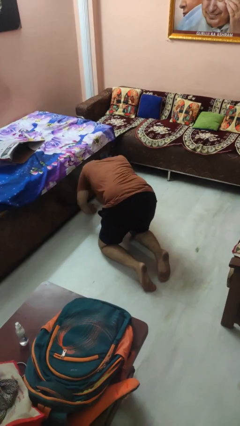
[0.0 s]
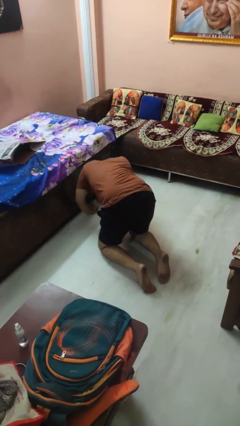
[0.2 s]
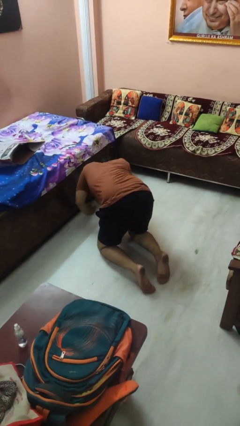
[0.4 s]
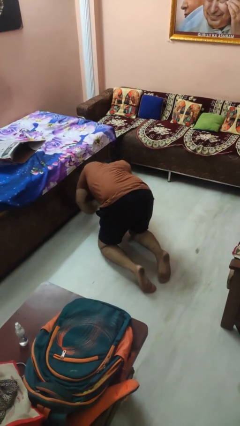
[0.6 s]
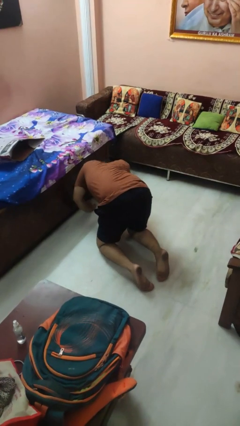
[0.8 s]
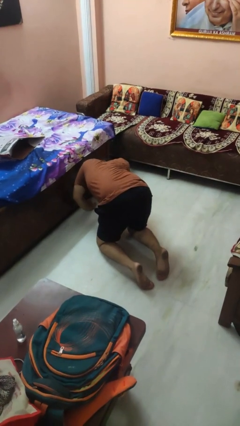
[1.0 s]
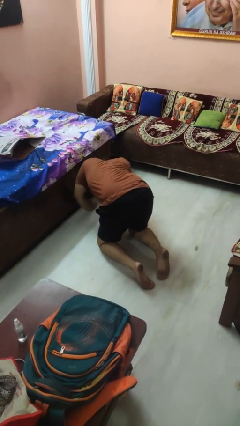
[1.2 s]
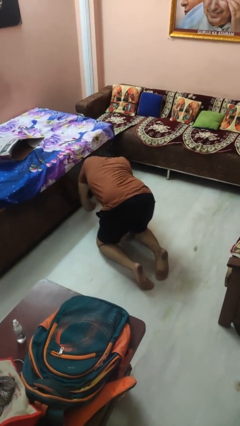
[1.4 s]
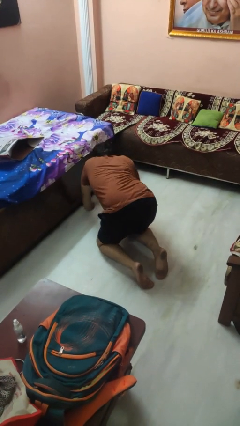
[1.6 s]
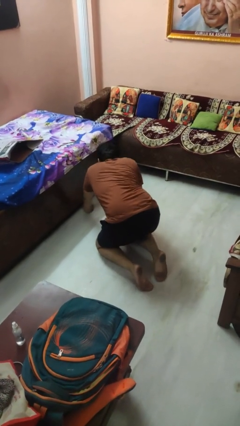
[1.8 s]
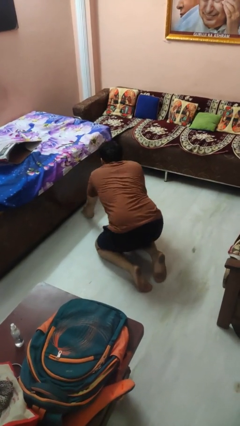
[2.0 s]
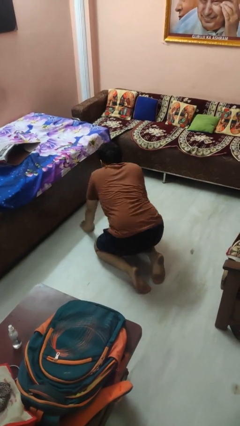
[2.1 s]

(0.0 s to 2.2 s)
person searches under bed

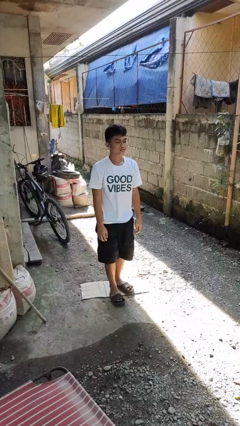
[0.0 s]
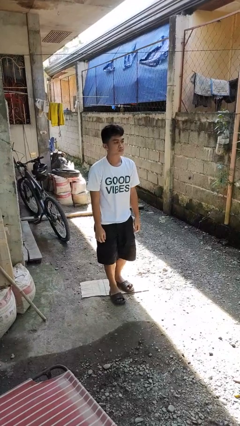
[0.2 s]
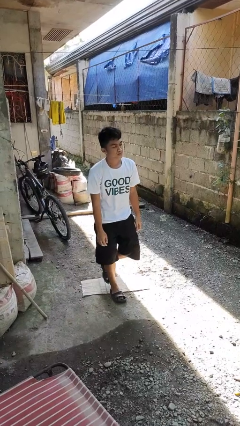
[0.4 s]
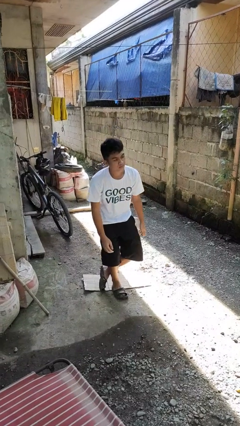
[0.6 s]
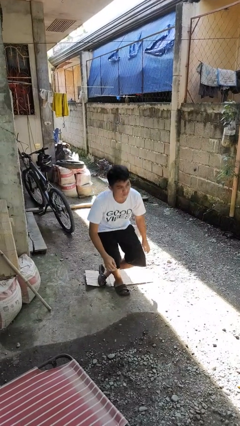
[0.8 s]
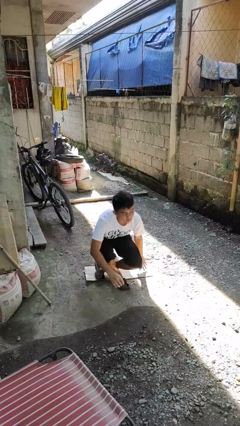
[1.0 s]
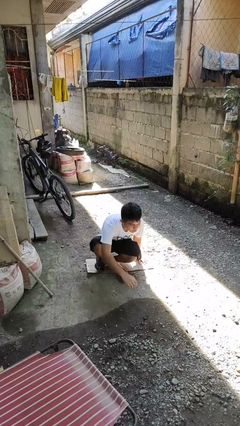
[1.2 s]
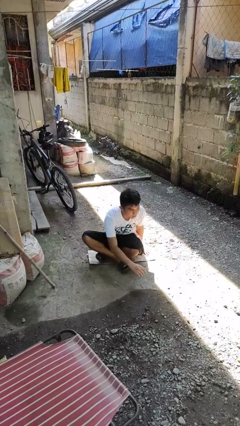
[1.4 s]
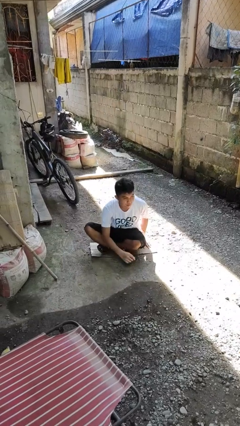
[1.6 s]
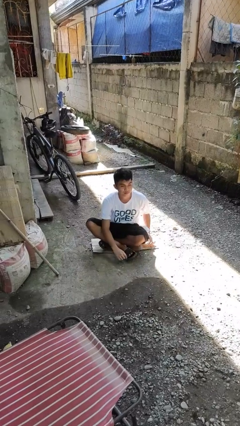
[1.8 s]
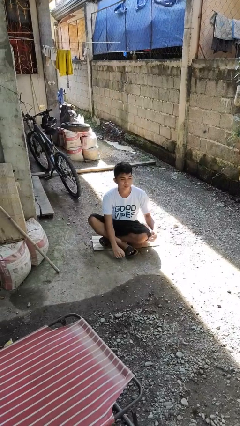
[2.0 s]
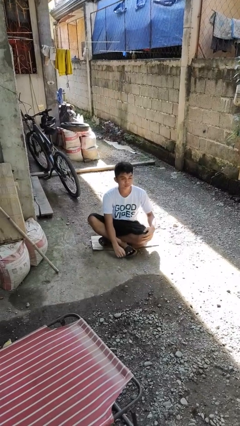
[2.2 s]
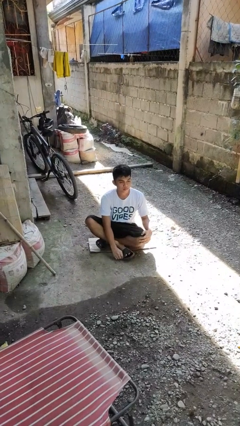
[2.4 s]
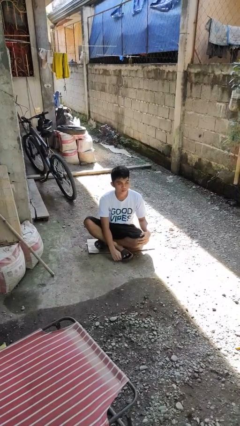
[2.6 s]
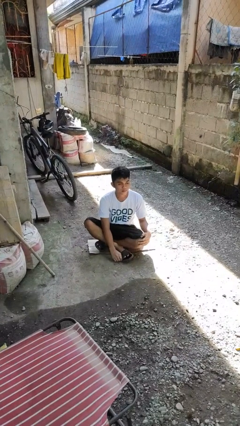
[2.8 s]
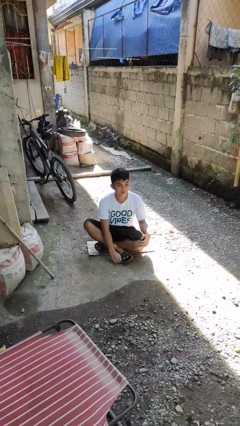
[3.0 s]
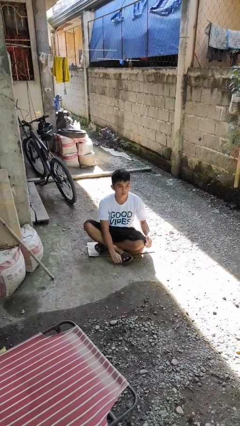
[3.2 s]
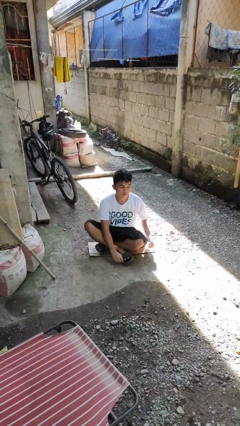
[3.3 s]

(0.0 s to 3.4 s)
person sits crisscross

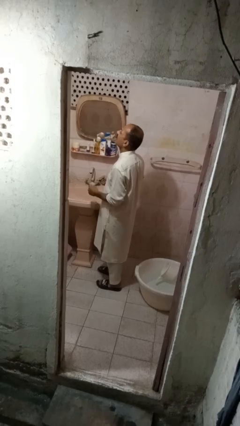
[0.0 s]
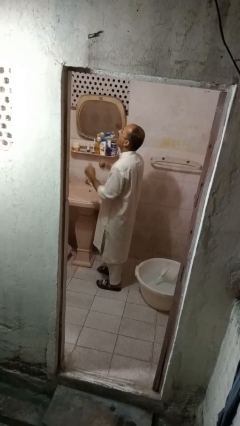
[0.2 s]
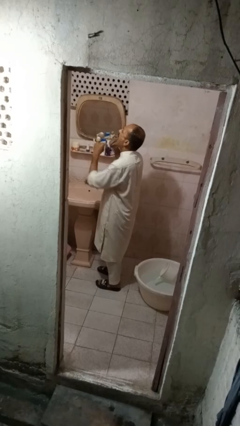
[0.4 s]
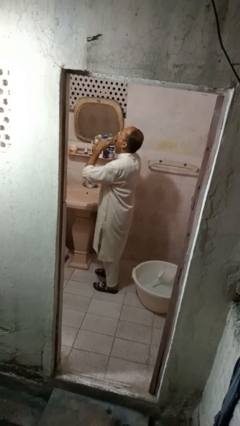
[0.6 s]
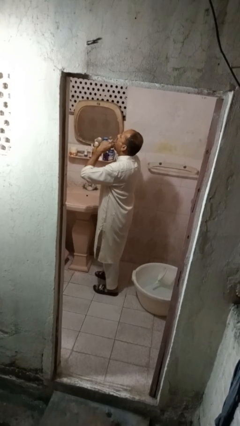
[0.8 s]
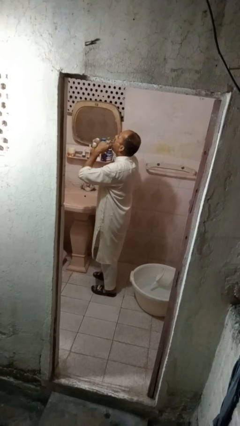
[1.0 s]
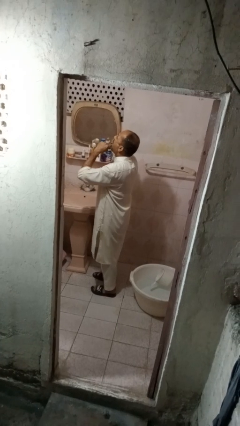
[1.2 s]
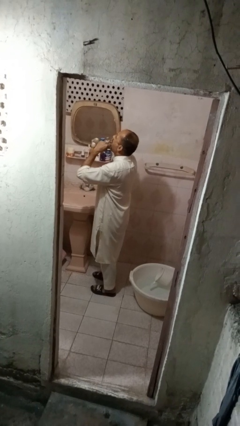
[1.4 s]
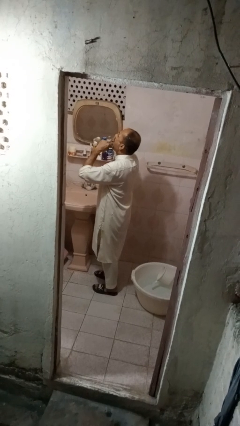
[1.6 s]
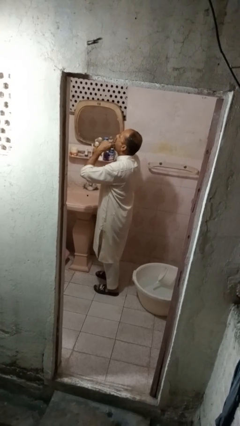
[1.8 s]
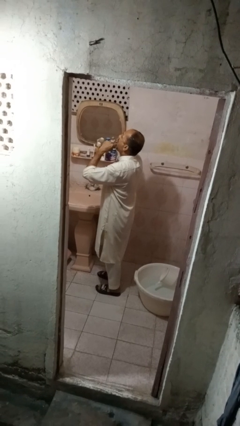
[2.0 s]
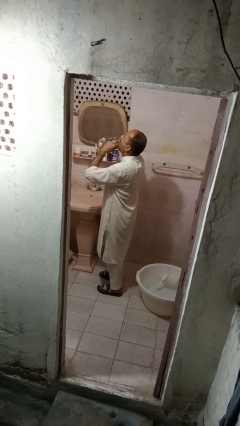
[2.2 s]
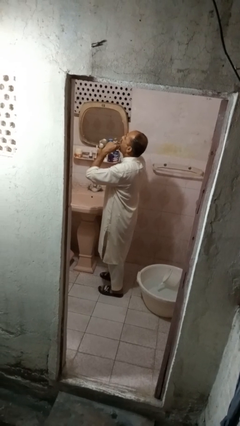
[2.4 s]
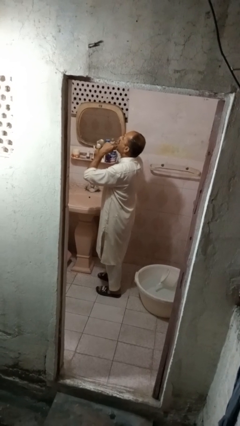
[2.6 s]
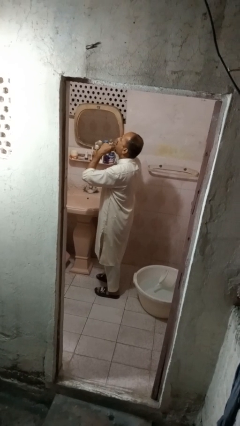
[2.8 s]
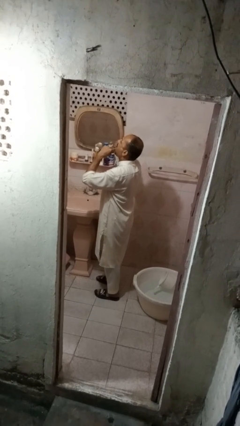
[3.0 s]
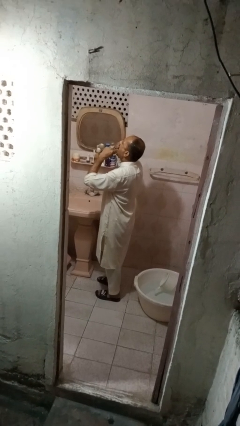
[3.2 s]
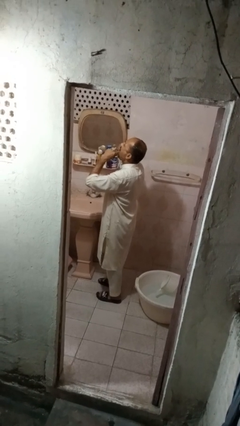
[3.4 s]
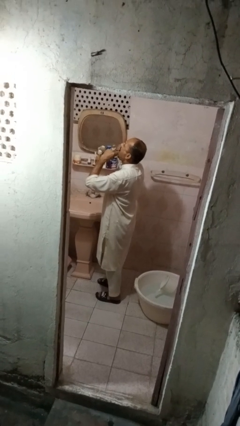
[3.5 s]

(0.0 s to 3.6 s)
person flosses

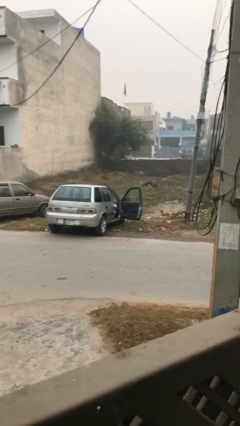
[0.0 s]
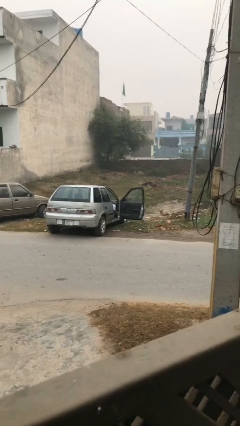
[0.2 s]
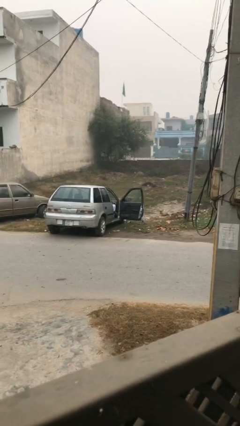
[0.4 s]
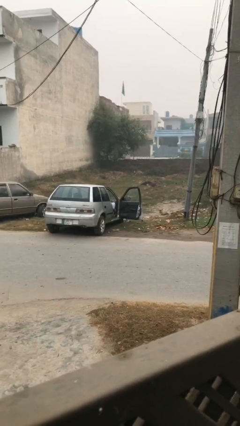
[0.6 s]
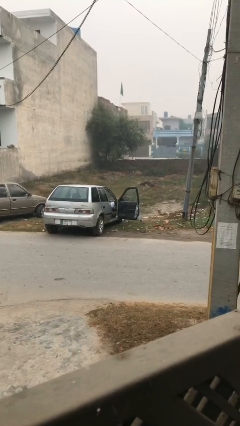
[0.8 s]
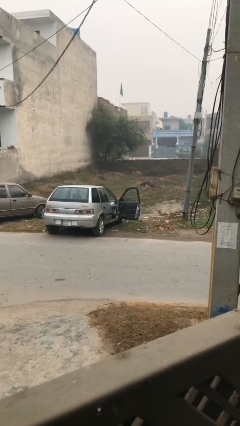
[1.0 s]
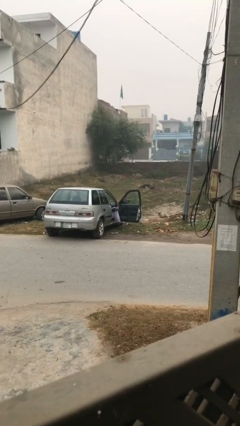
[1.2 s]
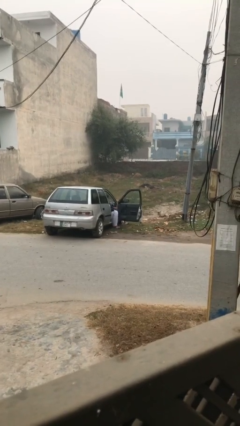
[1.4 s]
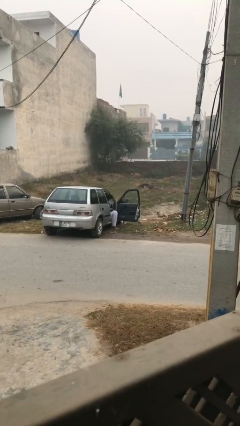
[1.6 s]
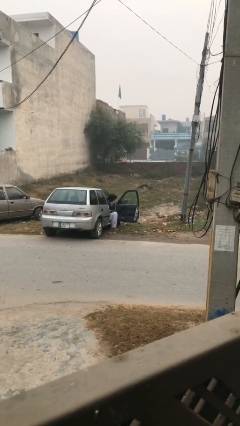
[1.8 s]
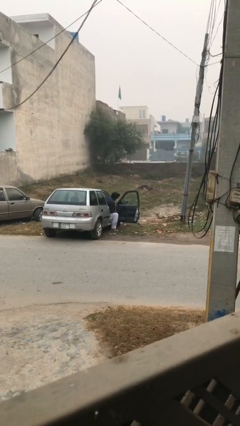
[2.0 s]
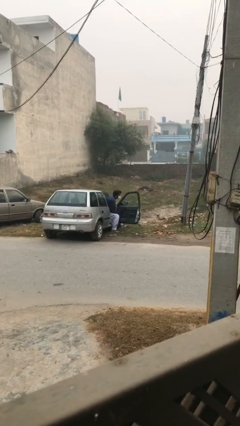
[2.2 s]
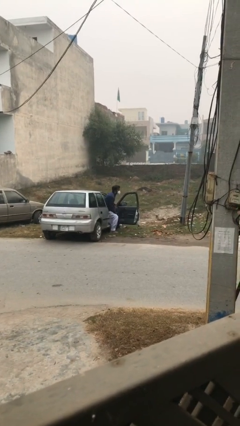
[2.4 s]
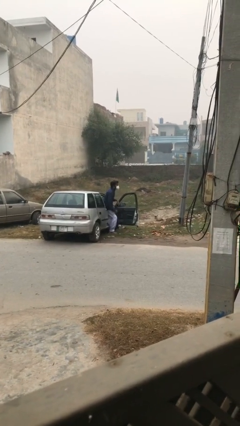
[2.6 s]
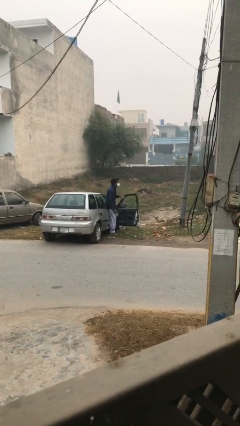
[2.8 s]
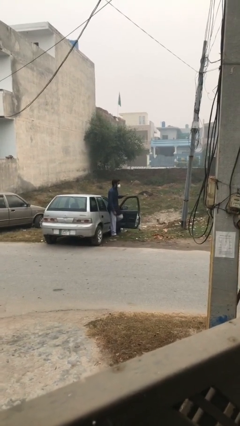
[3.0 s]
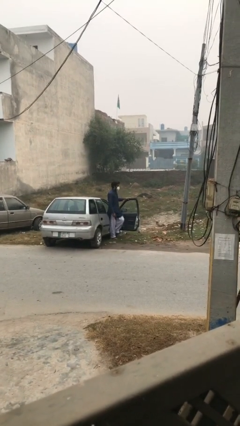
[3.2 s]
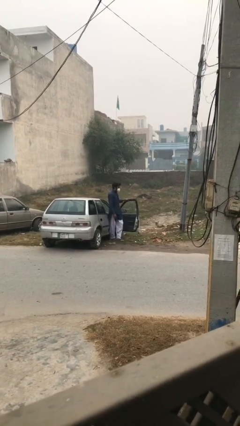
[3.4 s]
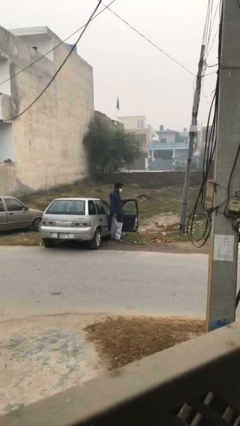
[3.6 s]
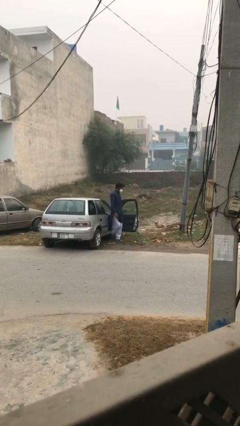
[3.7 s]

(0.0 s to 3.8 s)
person exits car

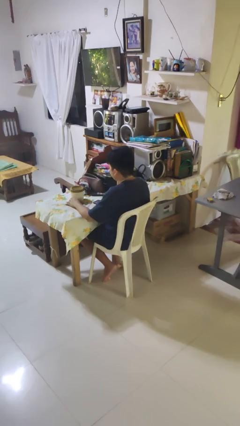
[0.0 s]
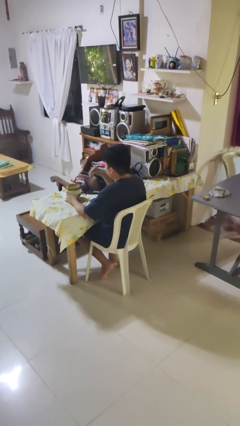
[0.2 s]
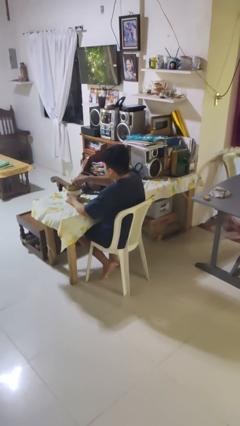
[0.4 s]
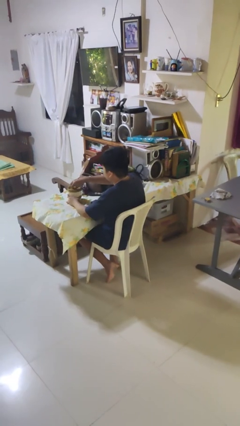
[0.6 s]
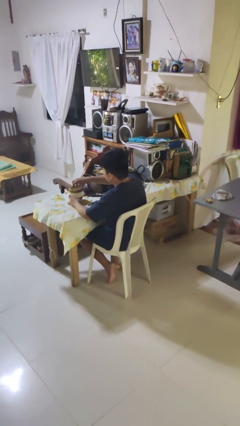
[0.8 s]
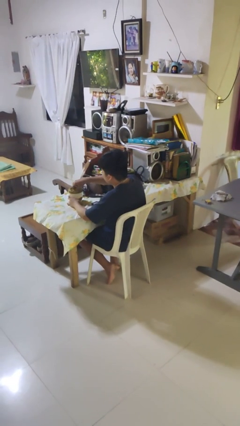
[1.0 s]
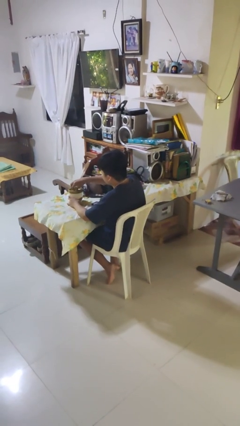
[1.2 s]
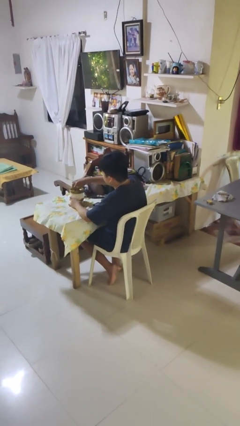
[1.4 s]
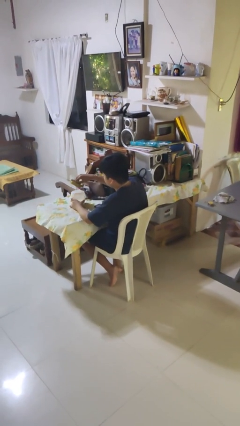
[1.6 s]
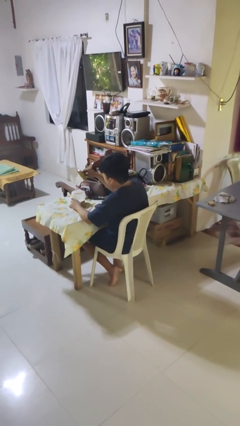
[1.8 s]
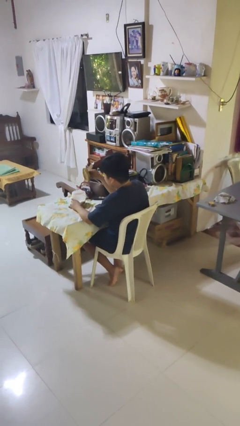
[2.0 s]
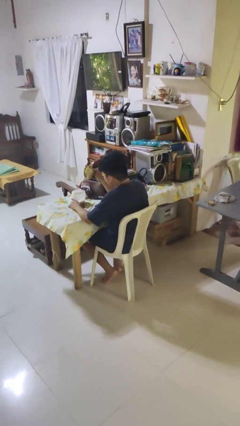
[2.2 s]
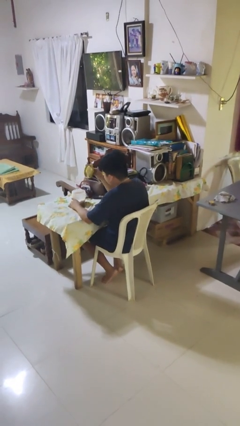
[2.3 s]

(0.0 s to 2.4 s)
person opens jar

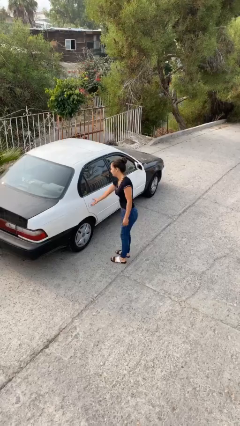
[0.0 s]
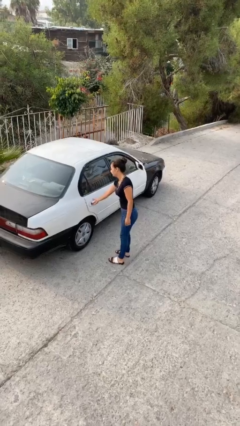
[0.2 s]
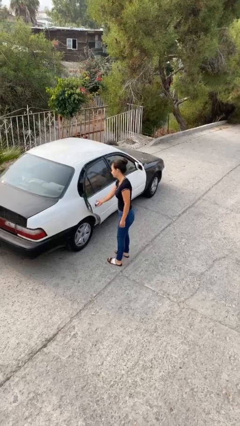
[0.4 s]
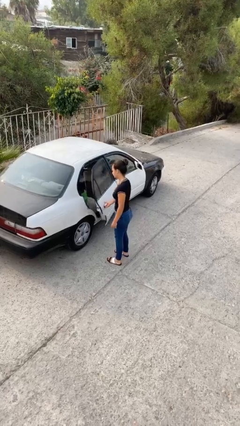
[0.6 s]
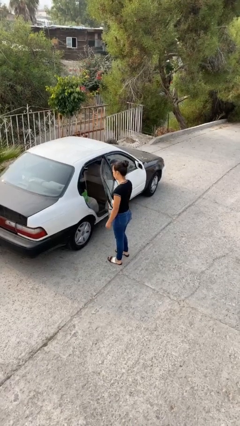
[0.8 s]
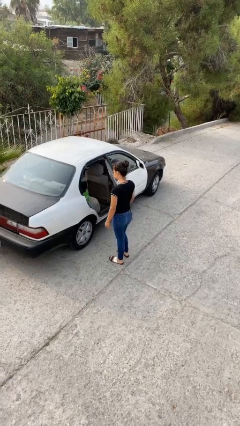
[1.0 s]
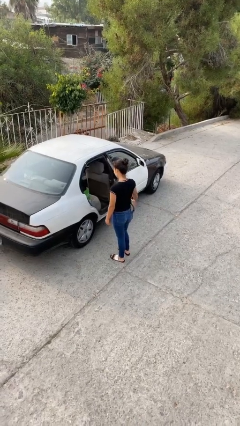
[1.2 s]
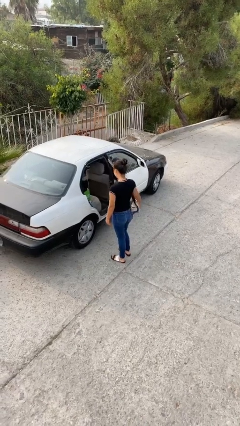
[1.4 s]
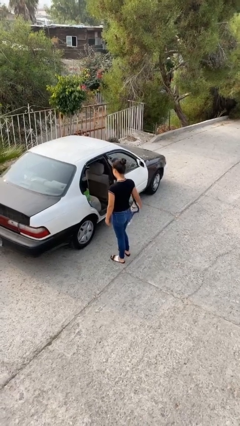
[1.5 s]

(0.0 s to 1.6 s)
person opens car door

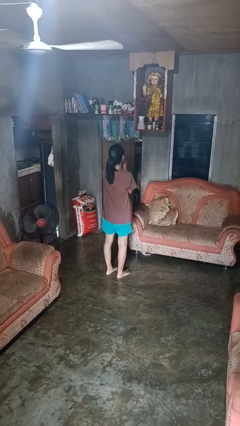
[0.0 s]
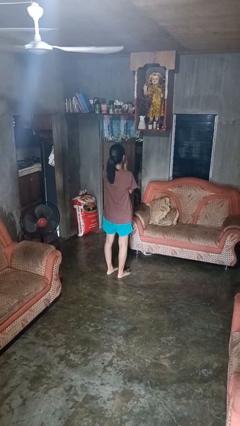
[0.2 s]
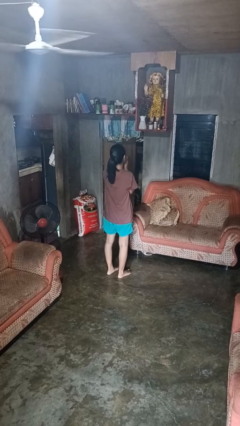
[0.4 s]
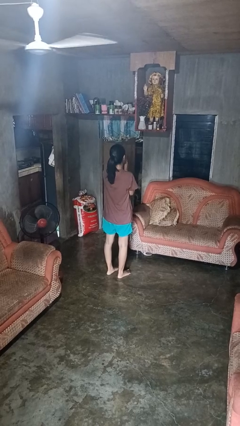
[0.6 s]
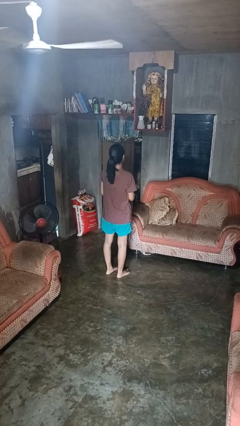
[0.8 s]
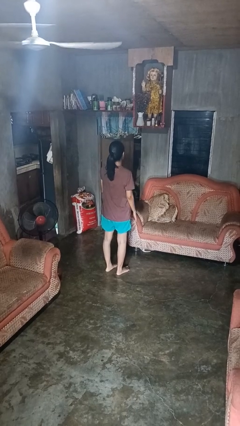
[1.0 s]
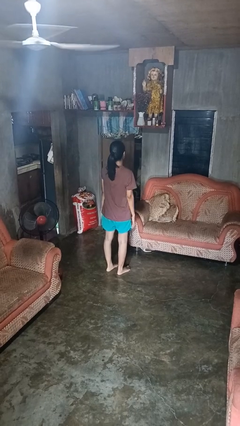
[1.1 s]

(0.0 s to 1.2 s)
person prays
